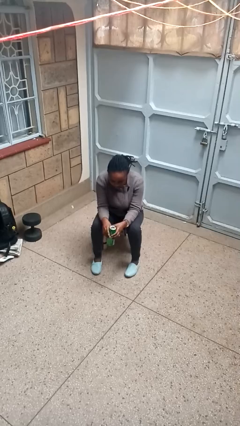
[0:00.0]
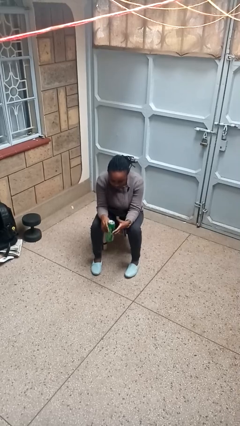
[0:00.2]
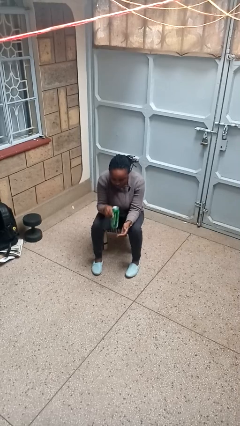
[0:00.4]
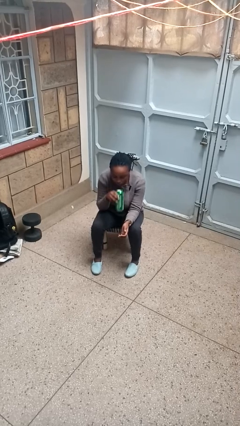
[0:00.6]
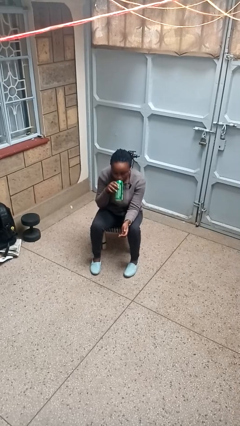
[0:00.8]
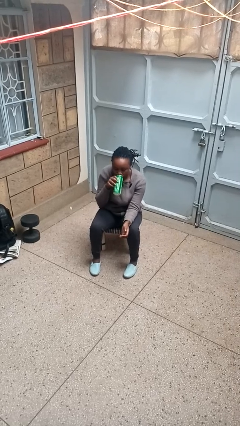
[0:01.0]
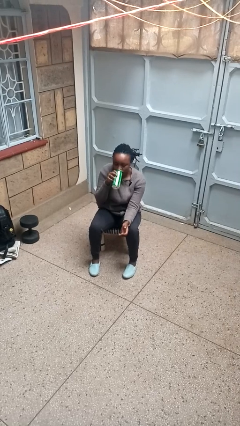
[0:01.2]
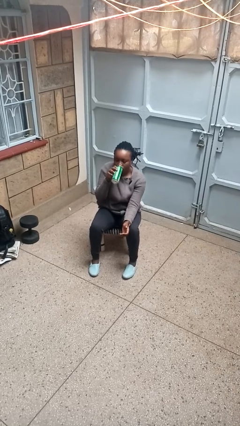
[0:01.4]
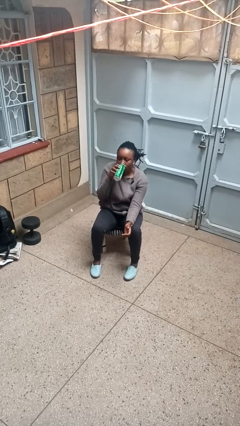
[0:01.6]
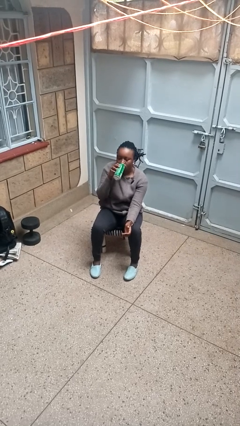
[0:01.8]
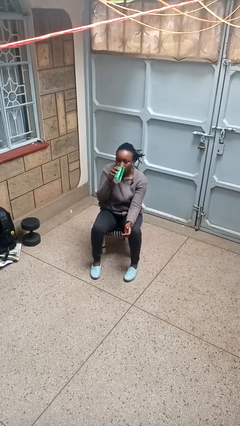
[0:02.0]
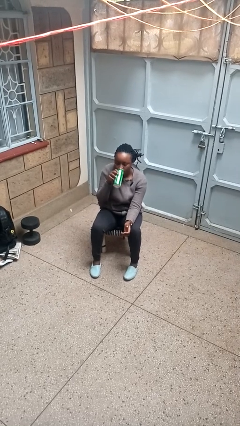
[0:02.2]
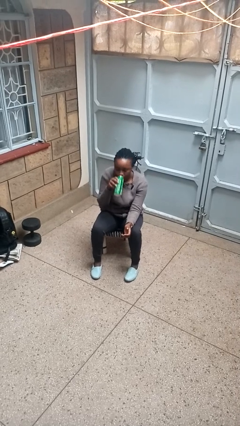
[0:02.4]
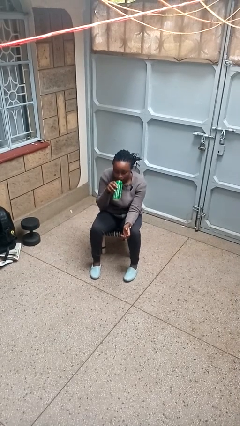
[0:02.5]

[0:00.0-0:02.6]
person drinks from beverage can

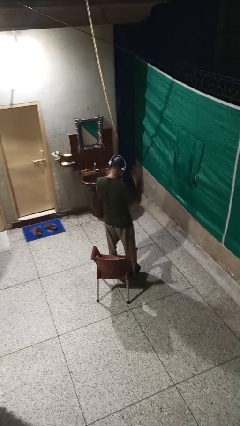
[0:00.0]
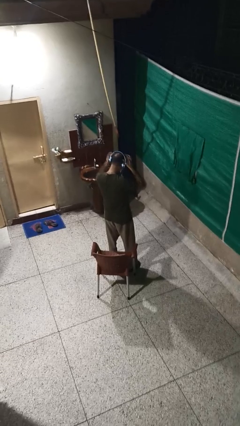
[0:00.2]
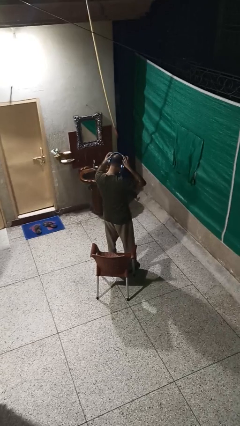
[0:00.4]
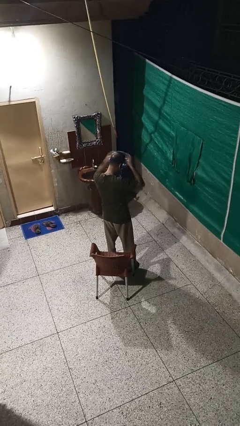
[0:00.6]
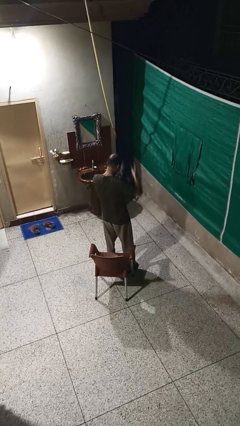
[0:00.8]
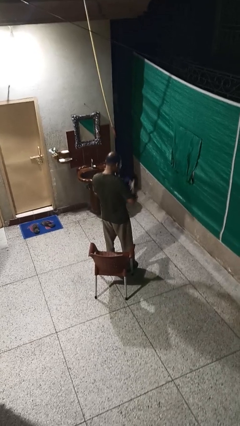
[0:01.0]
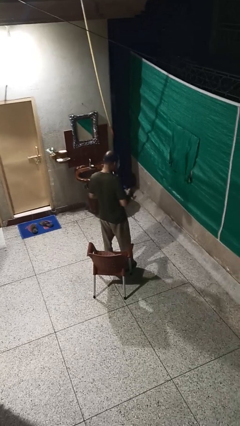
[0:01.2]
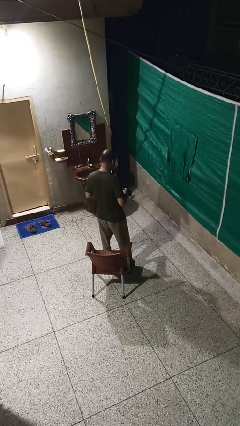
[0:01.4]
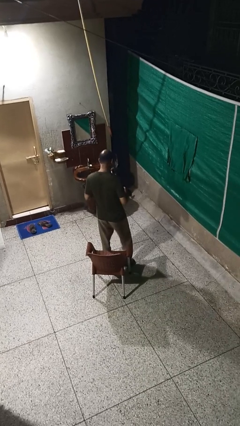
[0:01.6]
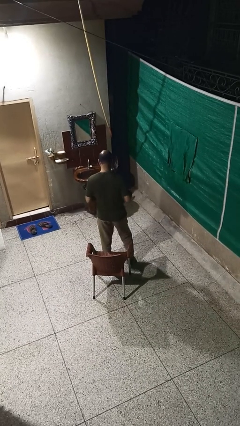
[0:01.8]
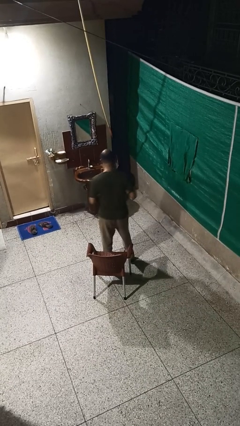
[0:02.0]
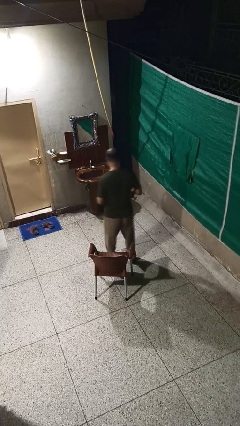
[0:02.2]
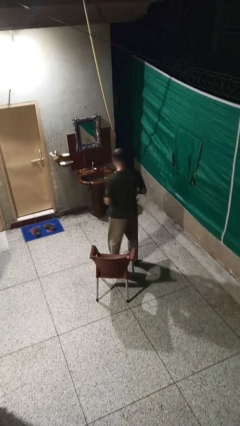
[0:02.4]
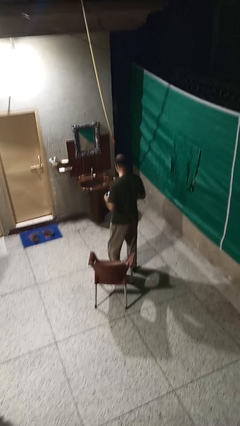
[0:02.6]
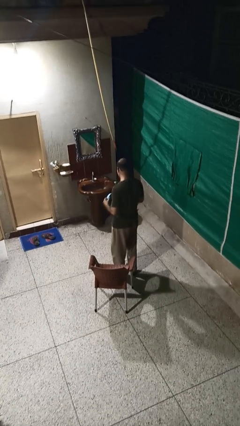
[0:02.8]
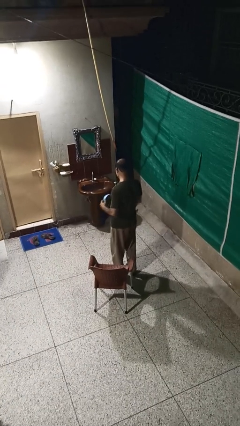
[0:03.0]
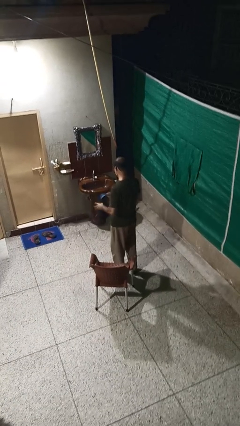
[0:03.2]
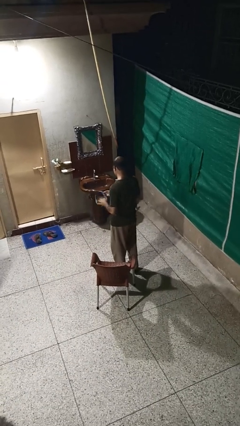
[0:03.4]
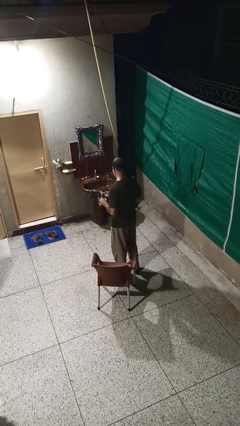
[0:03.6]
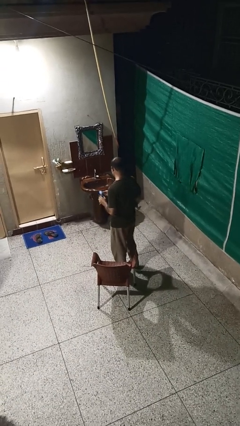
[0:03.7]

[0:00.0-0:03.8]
person takes off headphones

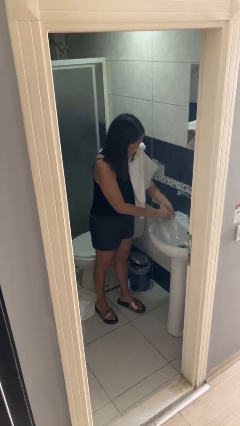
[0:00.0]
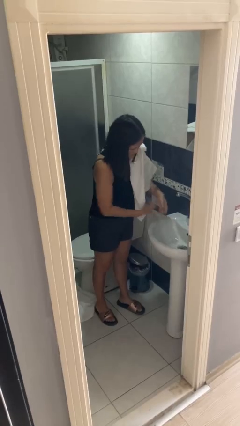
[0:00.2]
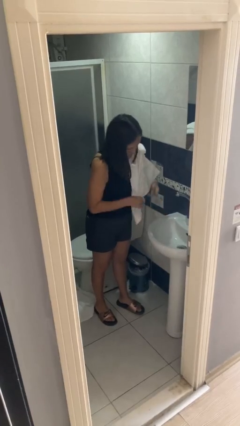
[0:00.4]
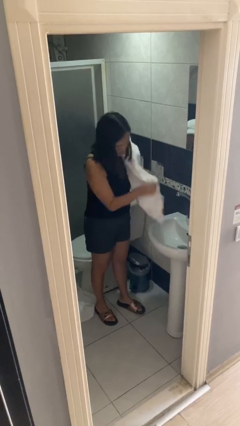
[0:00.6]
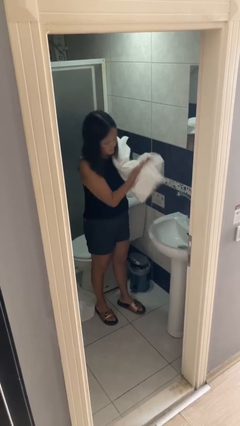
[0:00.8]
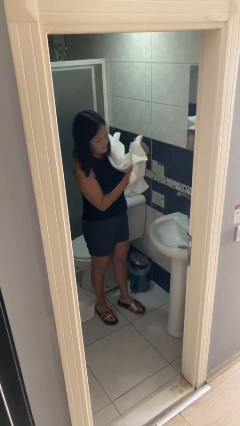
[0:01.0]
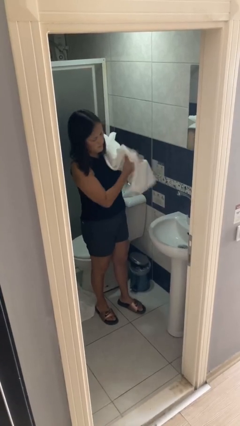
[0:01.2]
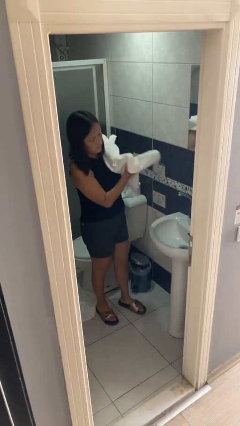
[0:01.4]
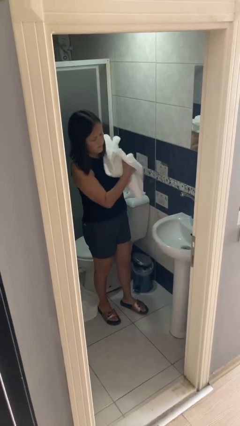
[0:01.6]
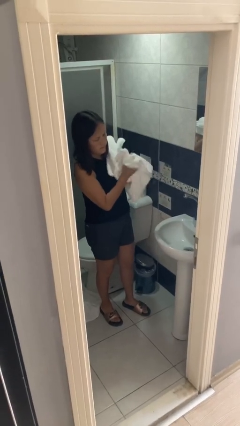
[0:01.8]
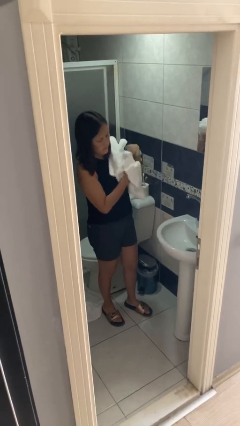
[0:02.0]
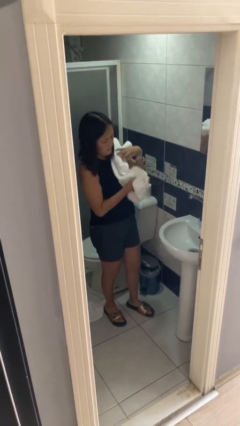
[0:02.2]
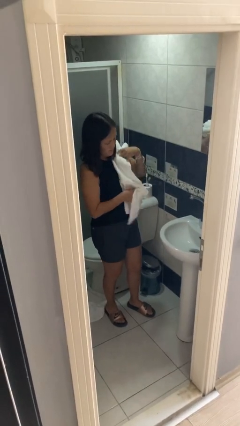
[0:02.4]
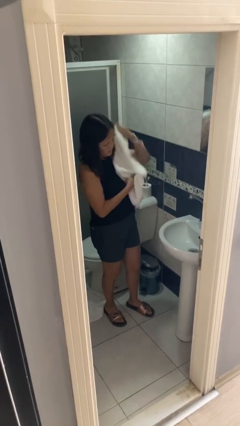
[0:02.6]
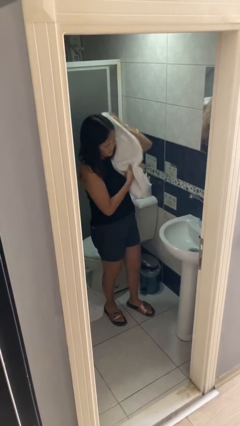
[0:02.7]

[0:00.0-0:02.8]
person dries hands with towel

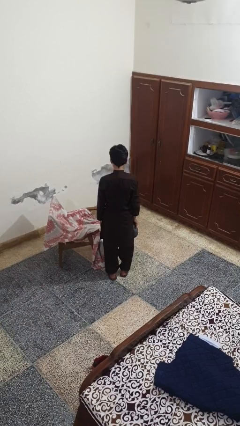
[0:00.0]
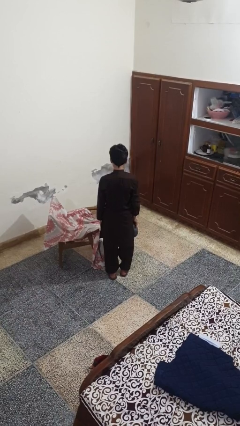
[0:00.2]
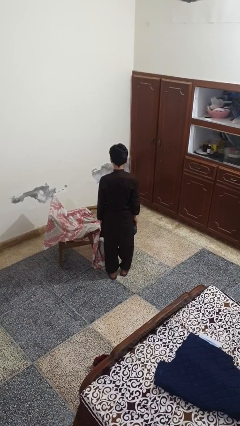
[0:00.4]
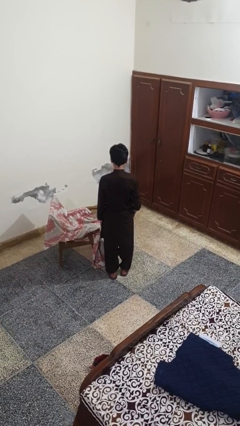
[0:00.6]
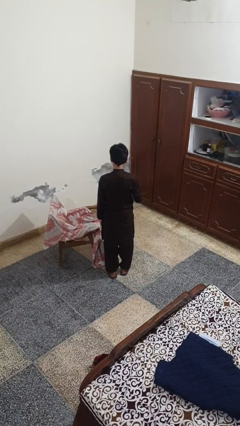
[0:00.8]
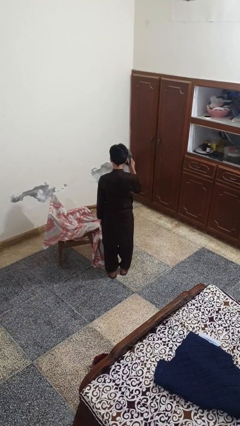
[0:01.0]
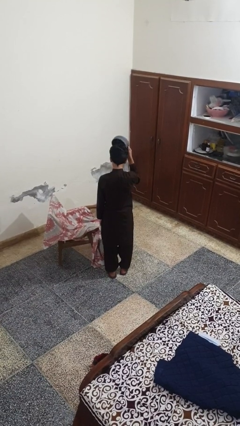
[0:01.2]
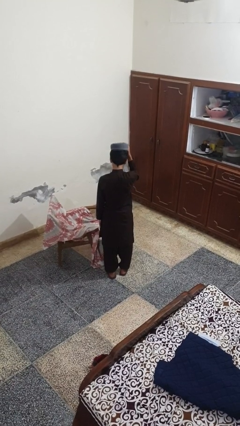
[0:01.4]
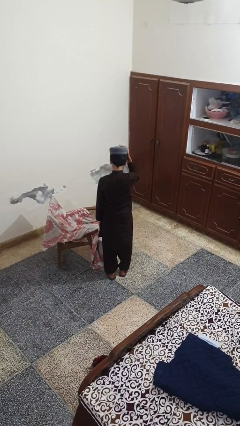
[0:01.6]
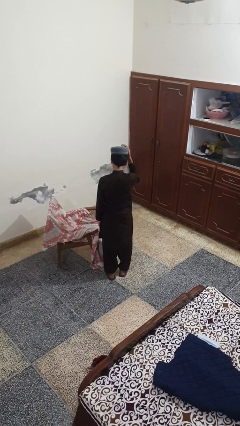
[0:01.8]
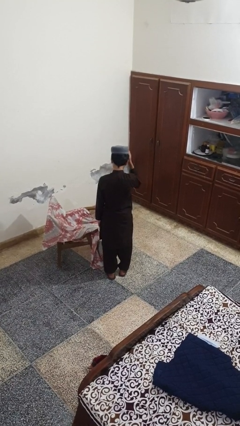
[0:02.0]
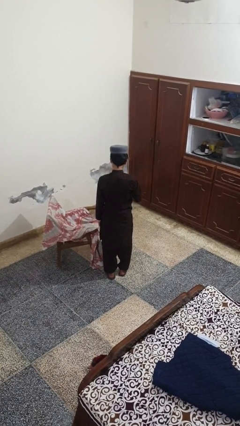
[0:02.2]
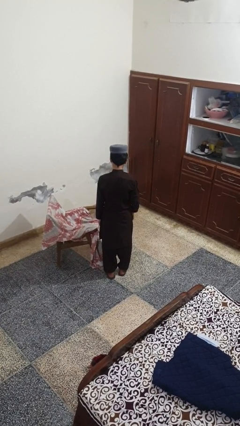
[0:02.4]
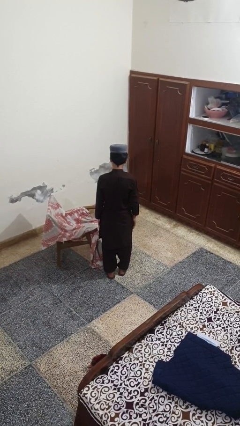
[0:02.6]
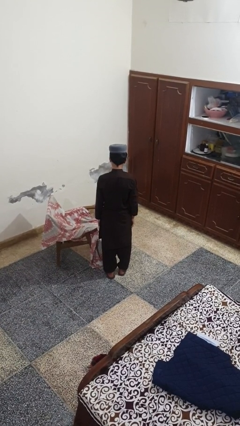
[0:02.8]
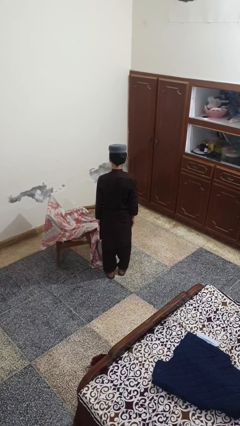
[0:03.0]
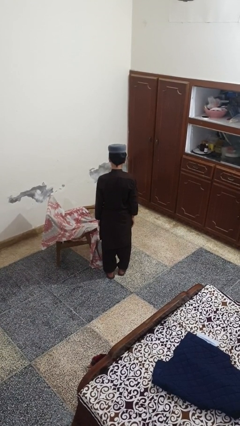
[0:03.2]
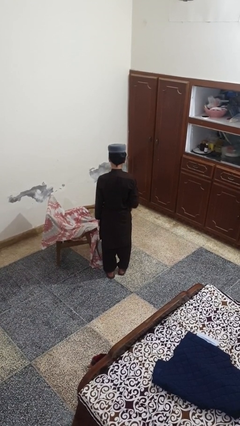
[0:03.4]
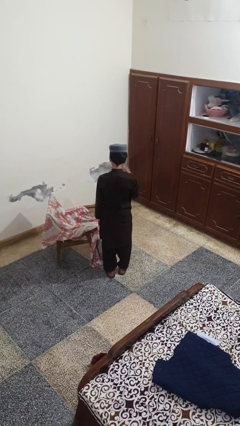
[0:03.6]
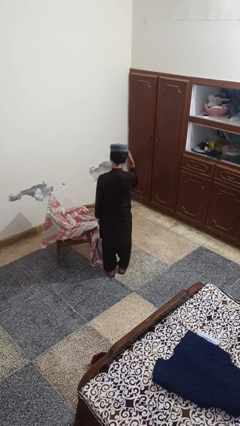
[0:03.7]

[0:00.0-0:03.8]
person puts on hat

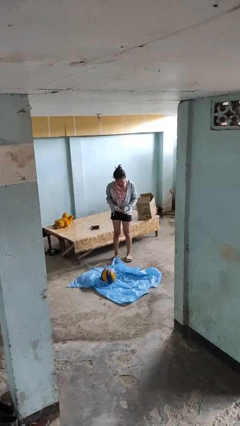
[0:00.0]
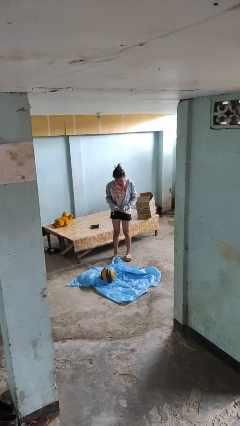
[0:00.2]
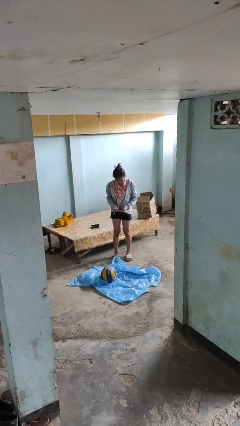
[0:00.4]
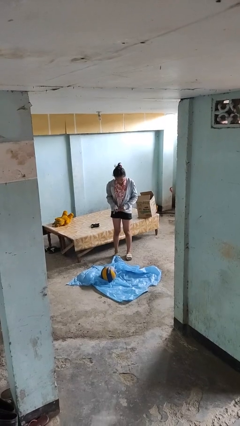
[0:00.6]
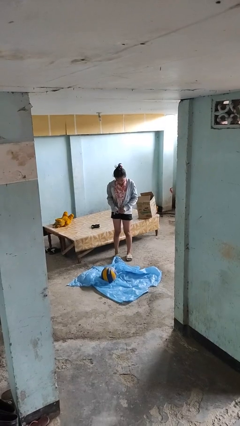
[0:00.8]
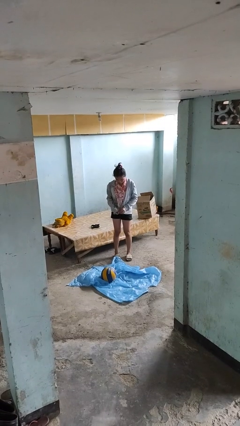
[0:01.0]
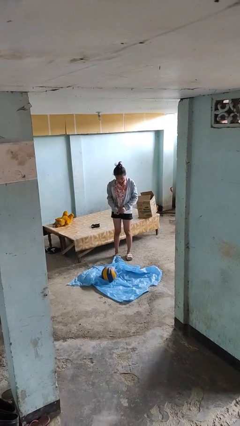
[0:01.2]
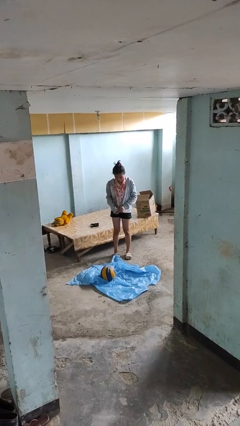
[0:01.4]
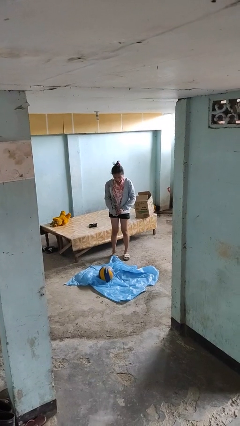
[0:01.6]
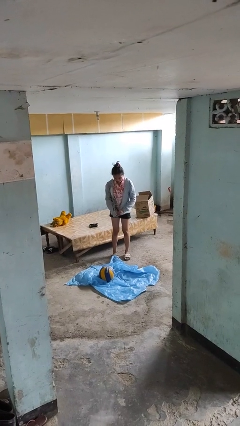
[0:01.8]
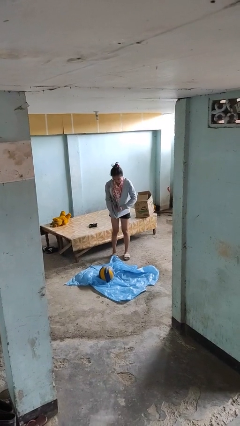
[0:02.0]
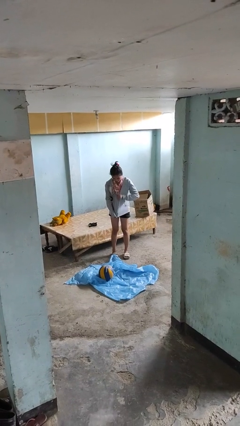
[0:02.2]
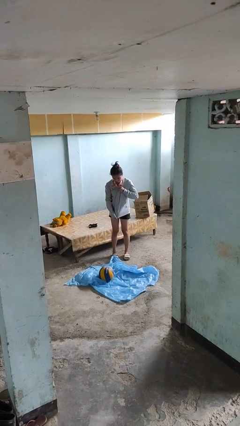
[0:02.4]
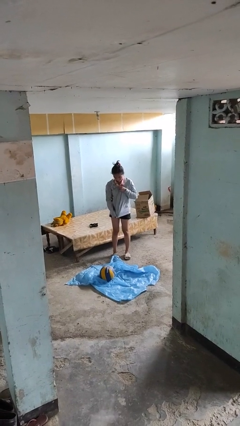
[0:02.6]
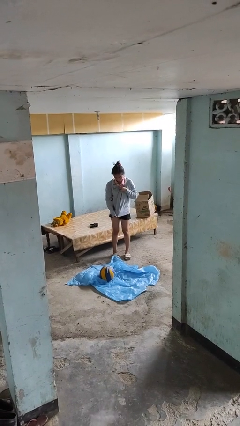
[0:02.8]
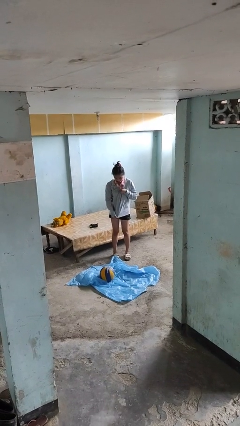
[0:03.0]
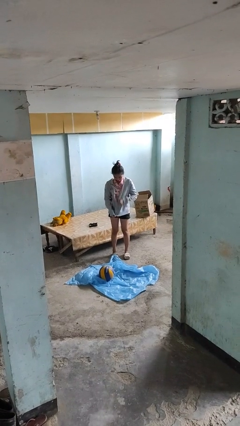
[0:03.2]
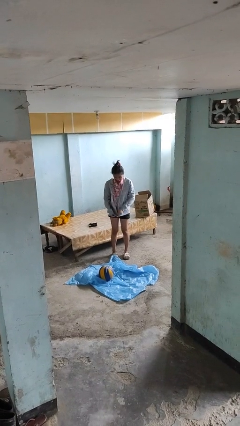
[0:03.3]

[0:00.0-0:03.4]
person zips up jacket

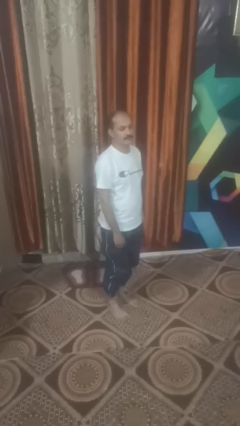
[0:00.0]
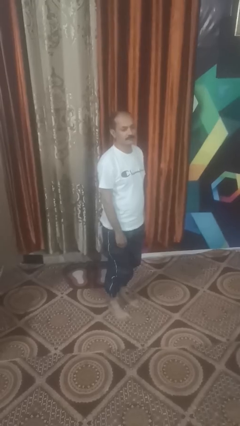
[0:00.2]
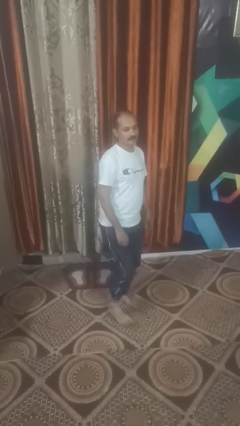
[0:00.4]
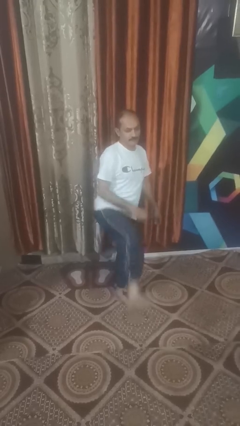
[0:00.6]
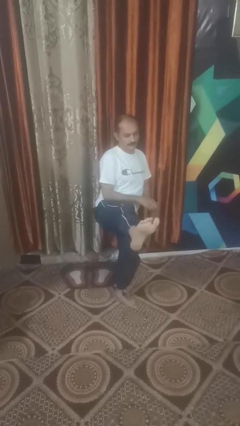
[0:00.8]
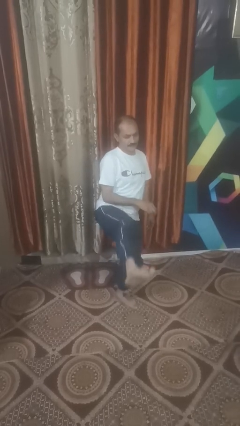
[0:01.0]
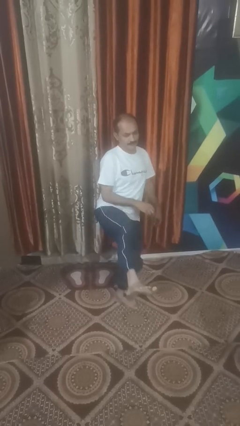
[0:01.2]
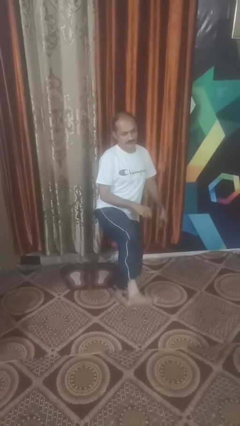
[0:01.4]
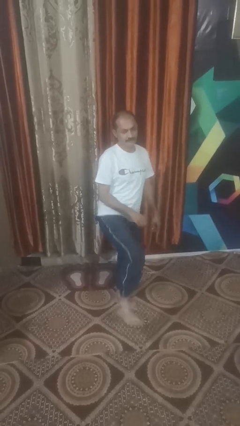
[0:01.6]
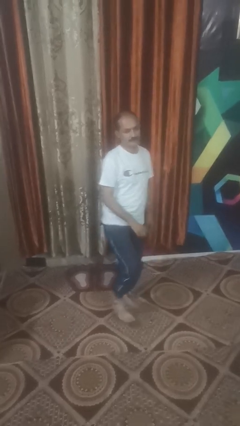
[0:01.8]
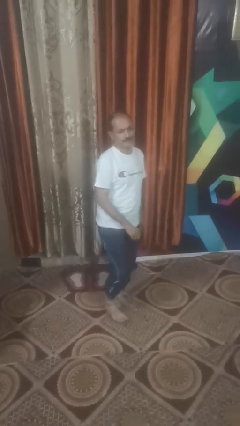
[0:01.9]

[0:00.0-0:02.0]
person karate kicks
